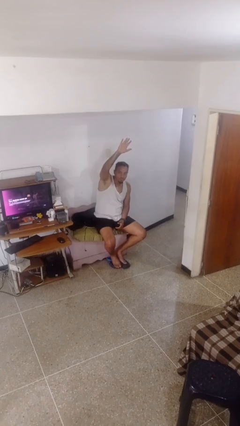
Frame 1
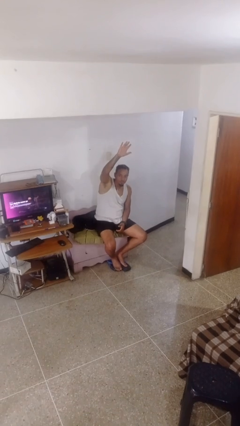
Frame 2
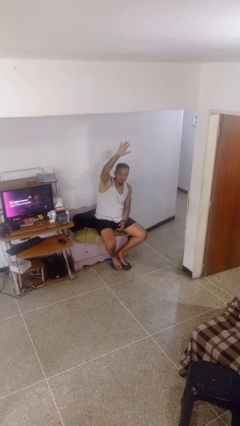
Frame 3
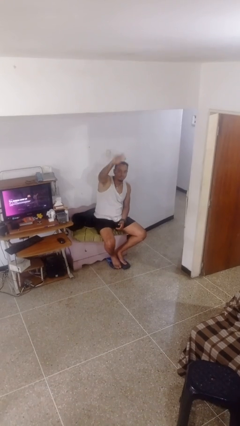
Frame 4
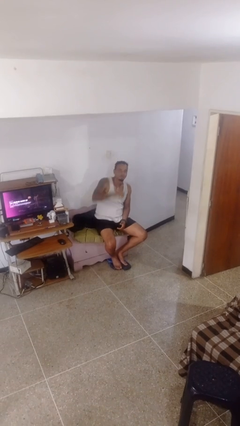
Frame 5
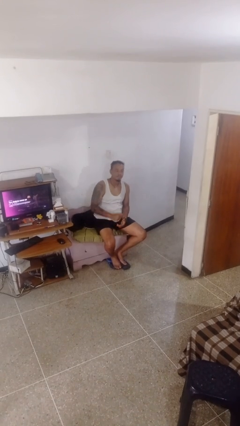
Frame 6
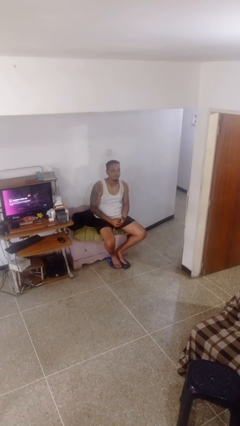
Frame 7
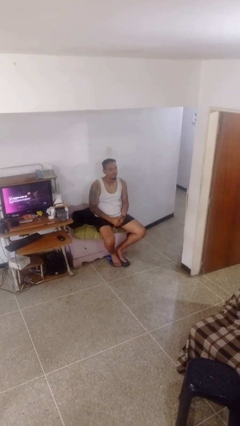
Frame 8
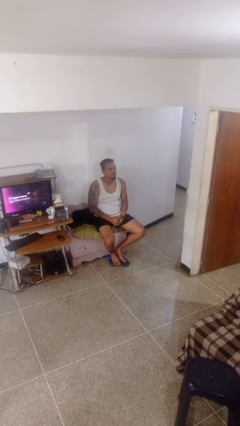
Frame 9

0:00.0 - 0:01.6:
person gestures lower hand

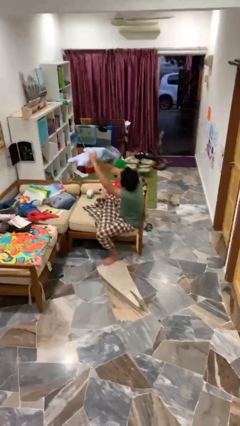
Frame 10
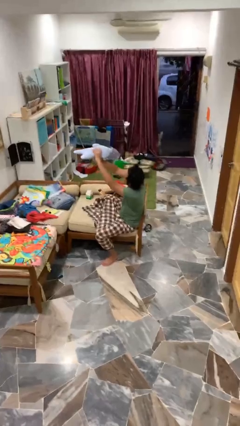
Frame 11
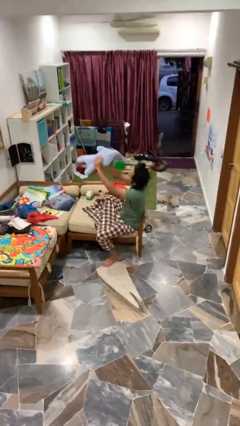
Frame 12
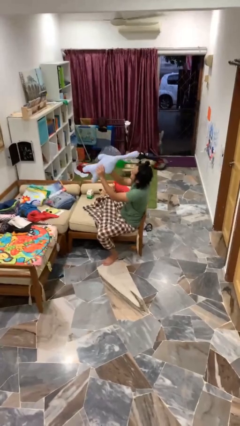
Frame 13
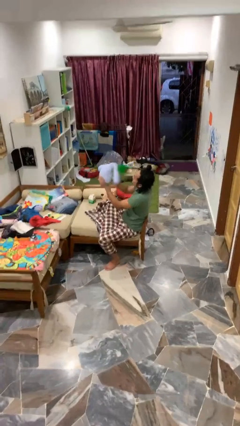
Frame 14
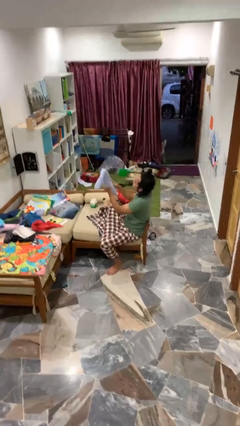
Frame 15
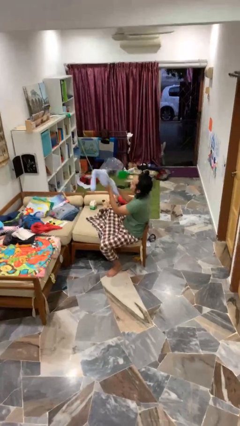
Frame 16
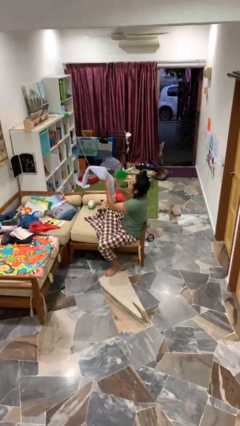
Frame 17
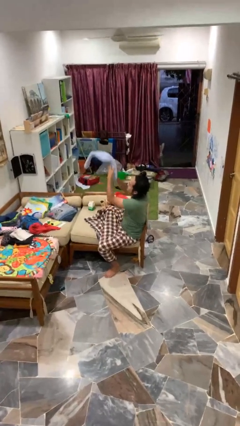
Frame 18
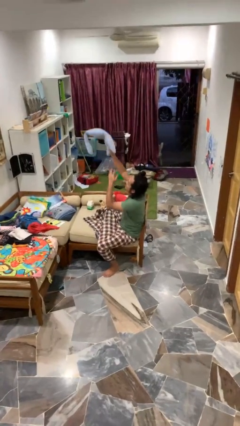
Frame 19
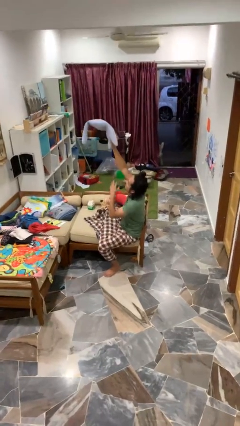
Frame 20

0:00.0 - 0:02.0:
person catches dropped object

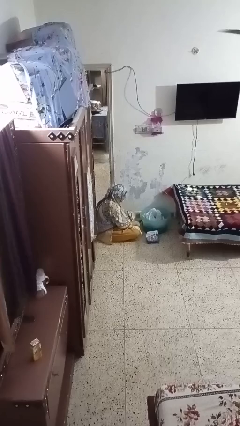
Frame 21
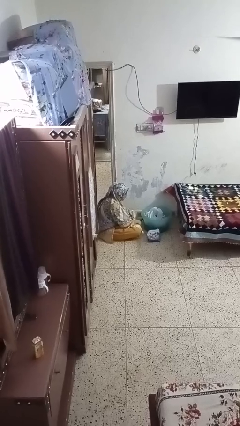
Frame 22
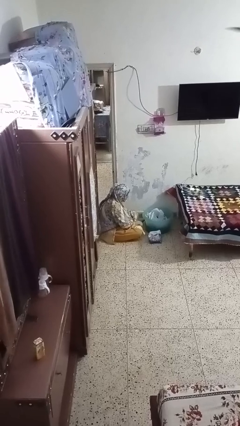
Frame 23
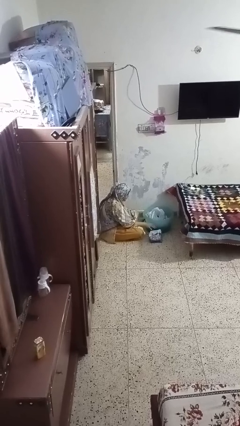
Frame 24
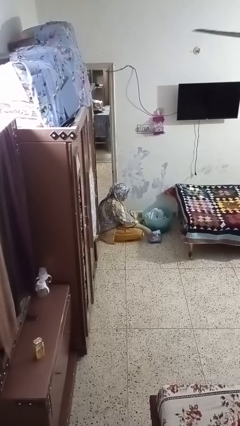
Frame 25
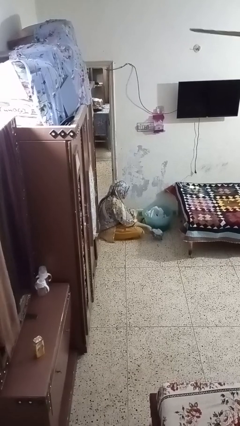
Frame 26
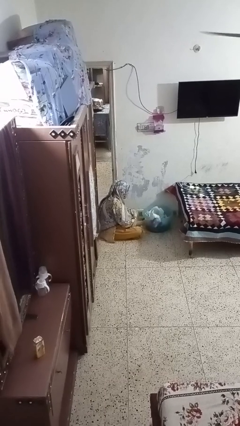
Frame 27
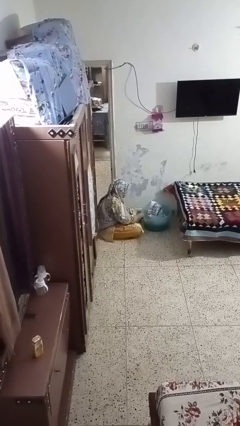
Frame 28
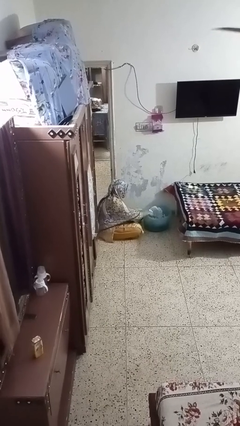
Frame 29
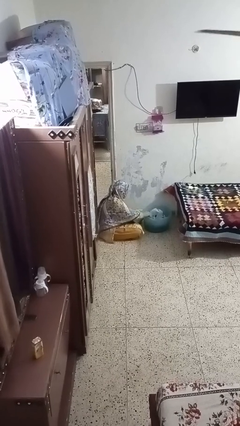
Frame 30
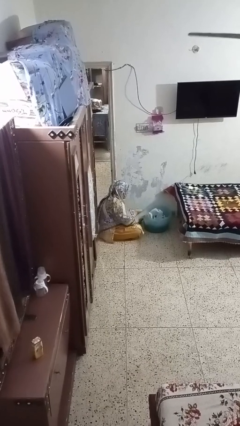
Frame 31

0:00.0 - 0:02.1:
person puts object into basket

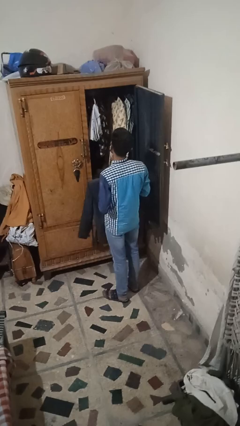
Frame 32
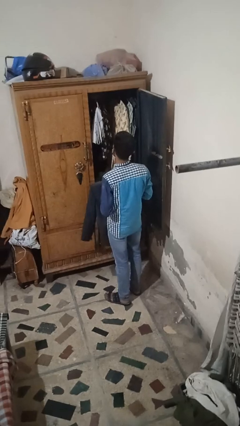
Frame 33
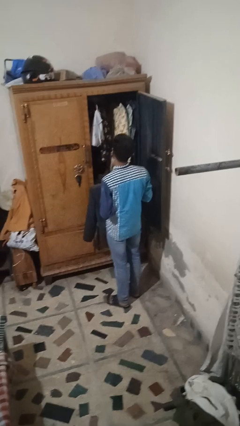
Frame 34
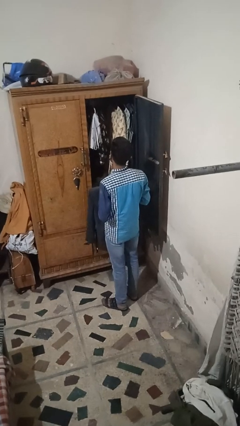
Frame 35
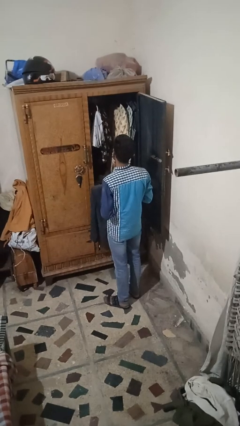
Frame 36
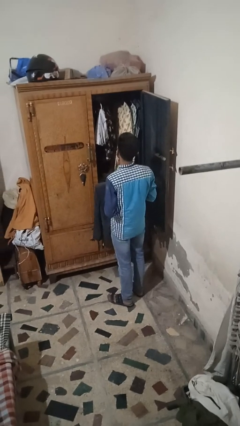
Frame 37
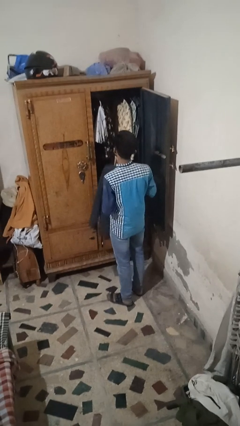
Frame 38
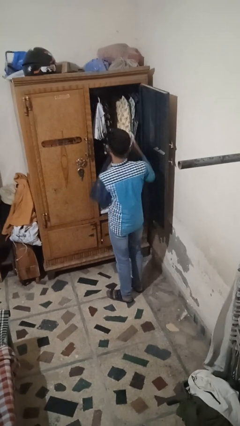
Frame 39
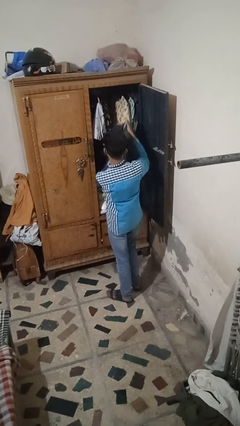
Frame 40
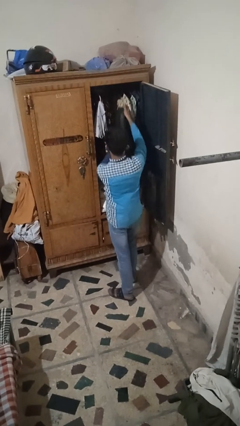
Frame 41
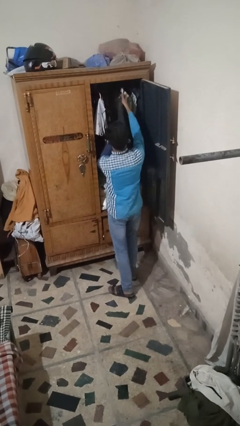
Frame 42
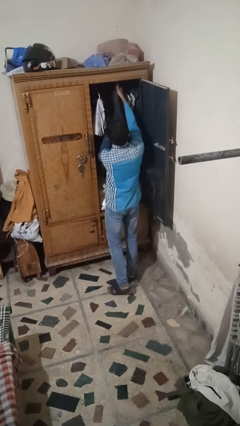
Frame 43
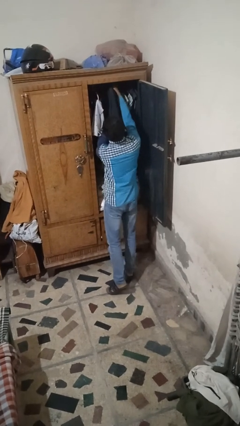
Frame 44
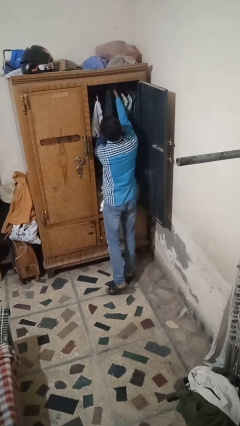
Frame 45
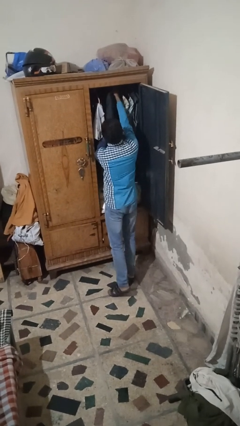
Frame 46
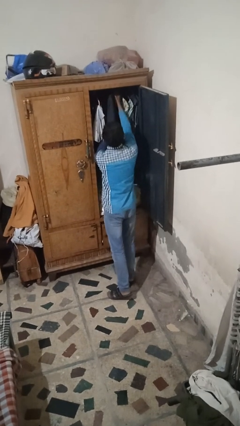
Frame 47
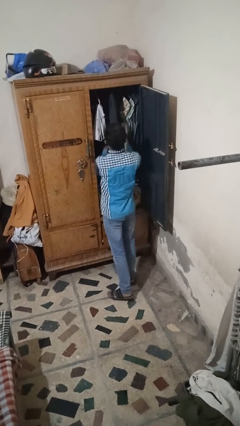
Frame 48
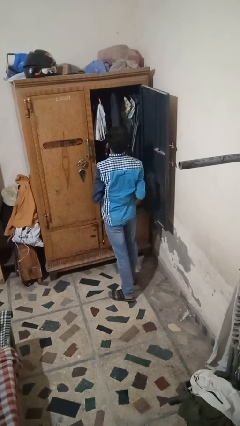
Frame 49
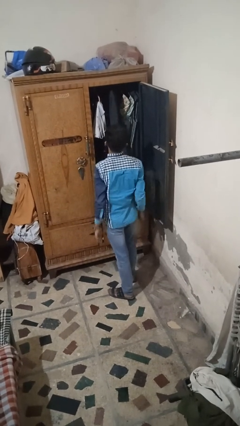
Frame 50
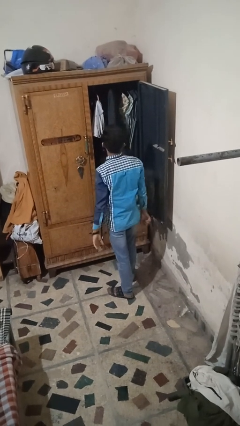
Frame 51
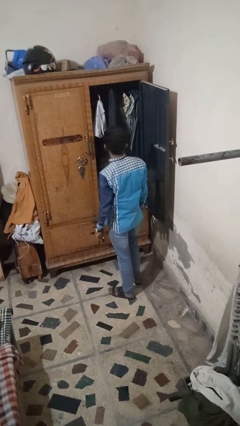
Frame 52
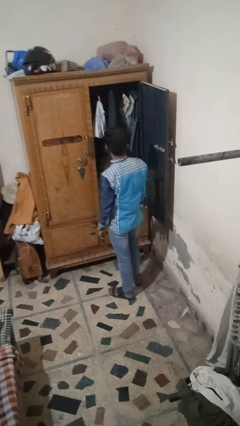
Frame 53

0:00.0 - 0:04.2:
person puts clothes into closet

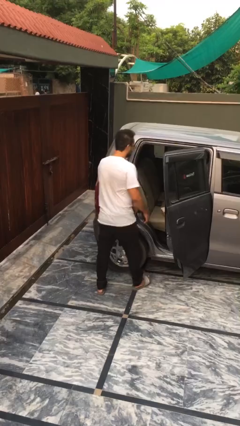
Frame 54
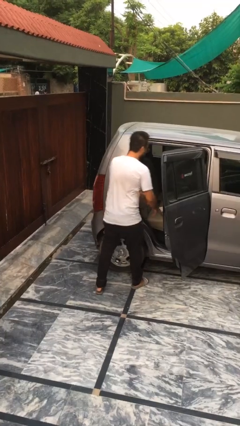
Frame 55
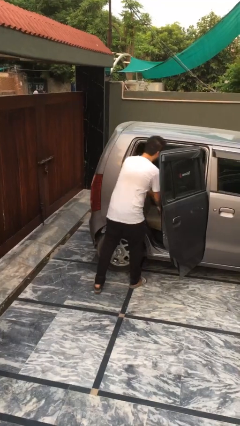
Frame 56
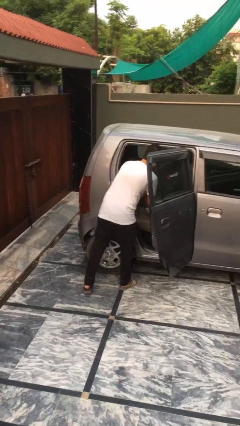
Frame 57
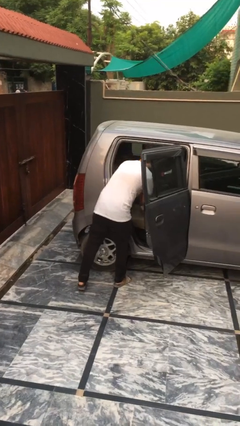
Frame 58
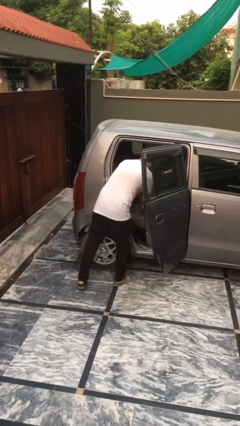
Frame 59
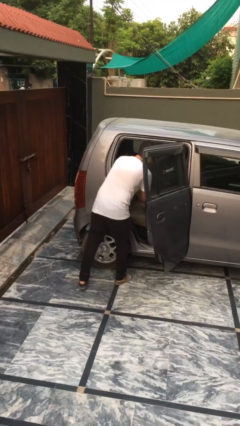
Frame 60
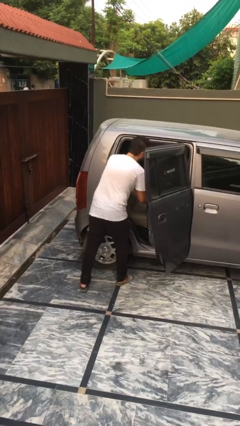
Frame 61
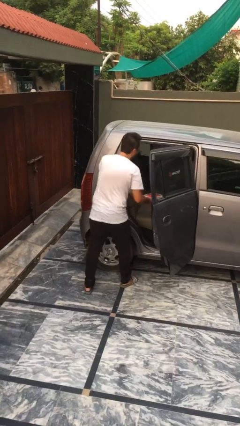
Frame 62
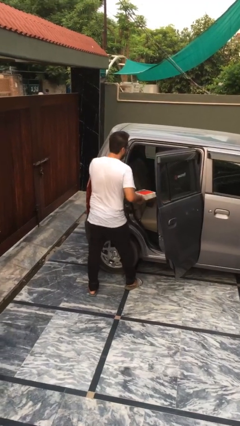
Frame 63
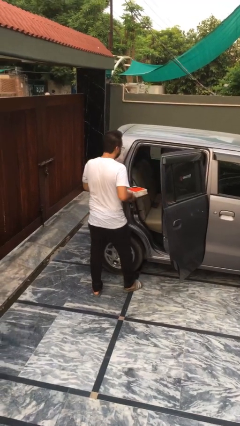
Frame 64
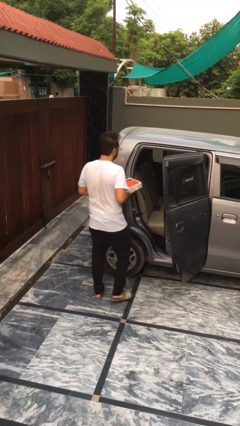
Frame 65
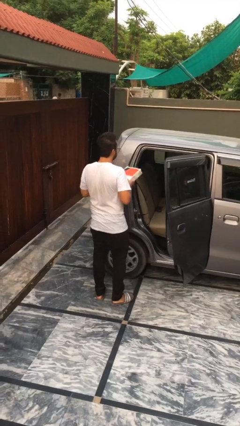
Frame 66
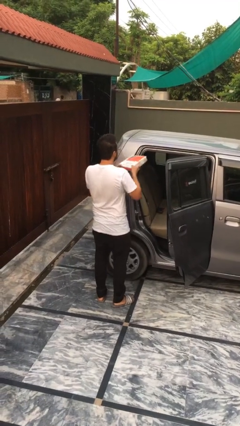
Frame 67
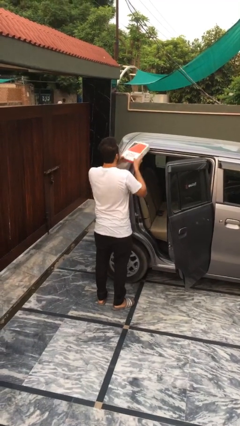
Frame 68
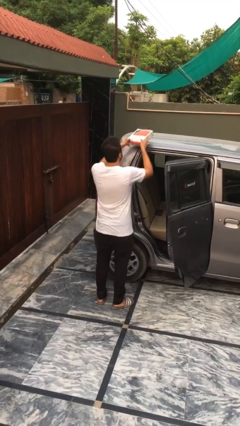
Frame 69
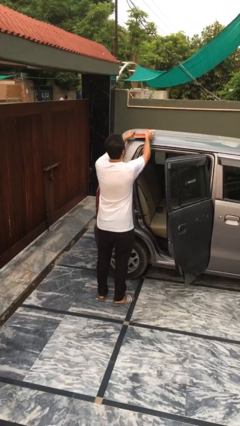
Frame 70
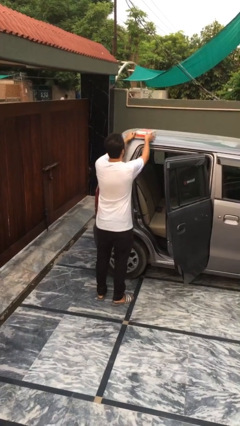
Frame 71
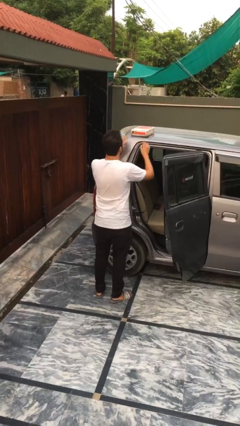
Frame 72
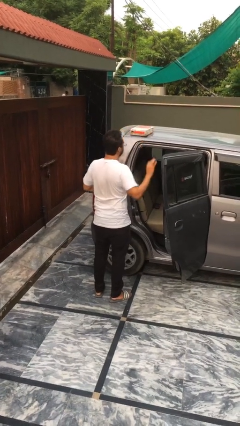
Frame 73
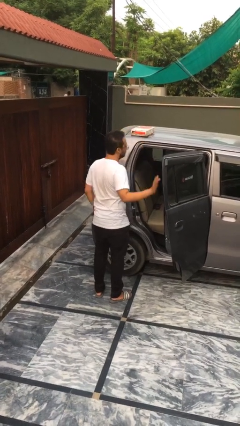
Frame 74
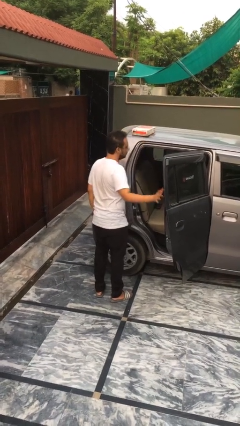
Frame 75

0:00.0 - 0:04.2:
person unloads car

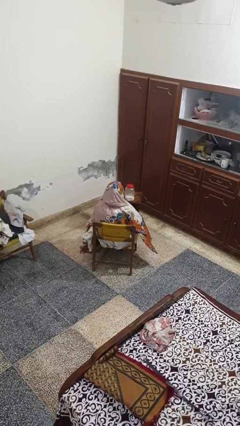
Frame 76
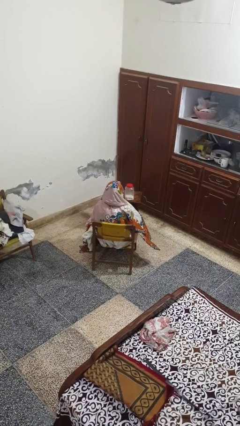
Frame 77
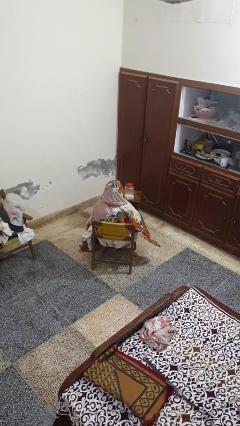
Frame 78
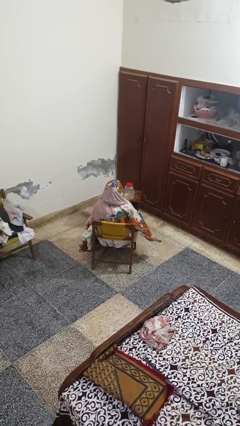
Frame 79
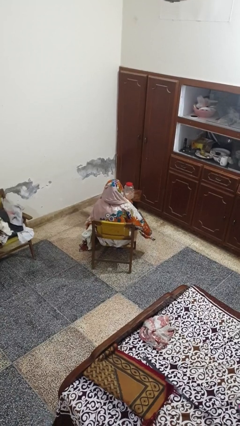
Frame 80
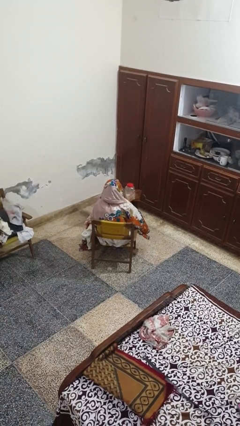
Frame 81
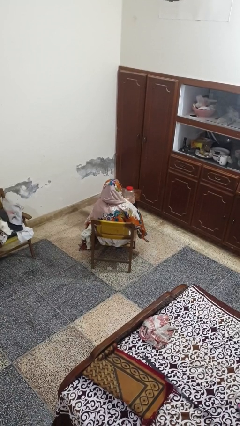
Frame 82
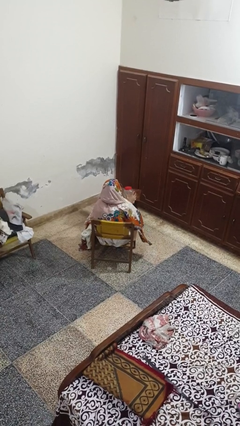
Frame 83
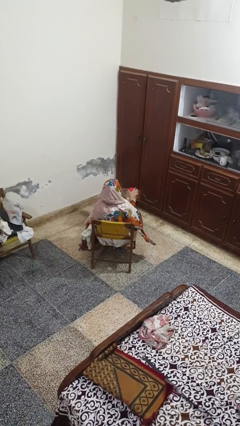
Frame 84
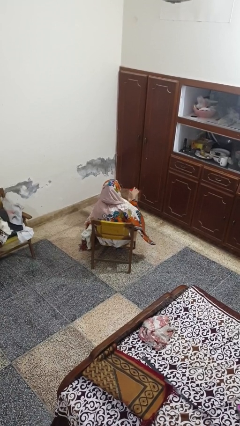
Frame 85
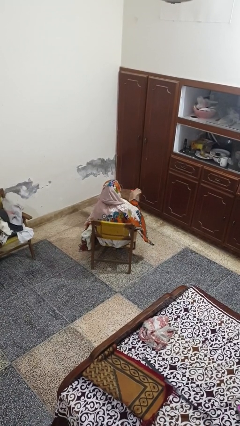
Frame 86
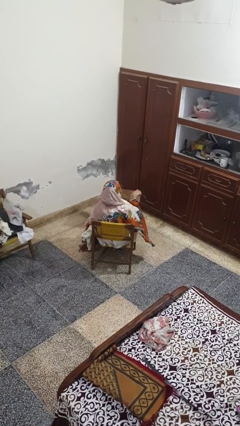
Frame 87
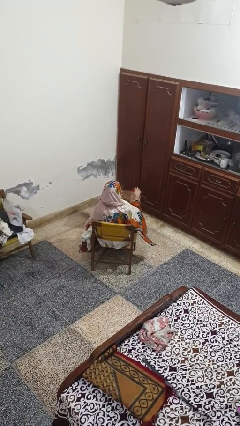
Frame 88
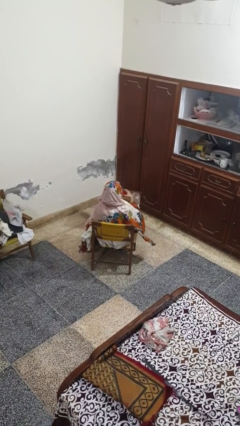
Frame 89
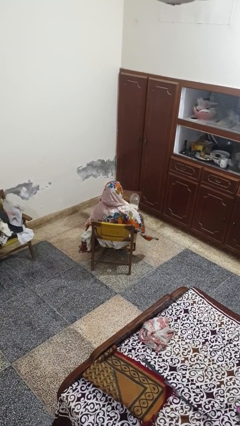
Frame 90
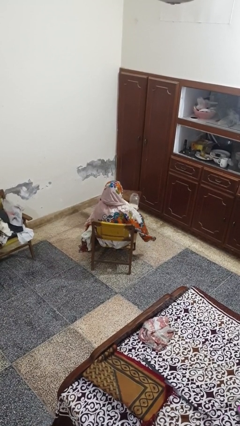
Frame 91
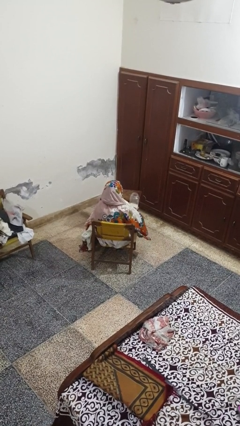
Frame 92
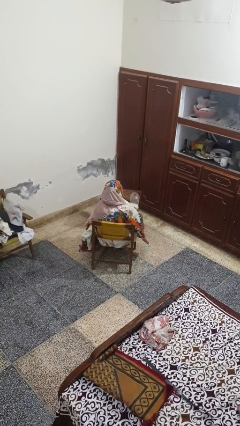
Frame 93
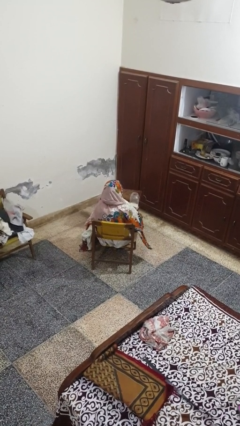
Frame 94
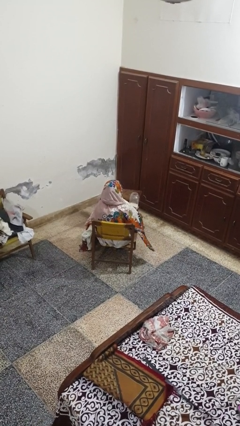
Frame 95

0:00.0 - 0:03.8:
person opens jar
